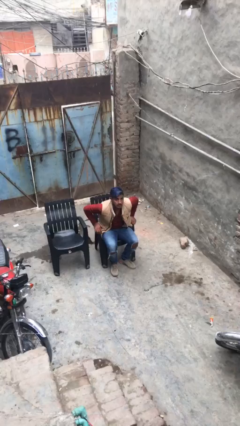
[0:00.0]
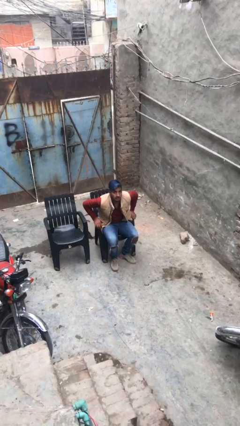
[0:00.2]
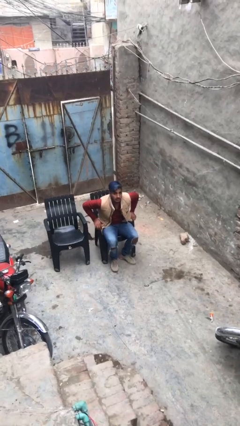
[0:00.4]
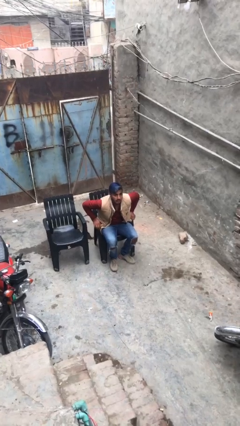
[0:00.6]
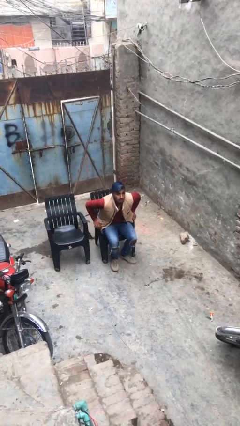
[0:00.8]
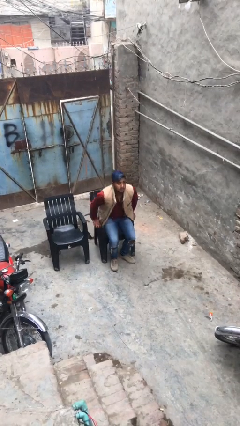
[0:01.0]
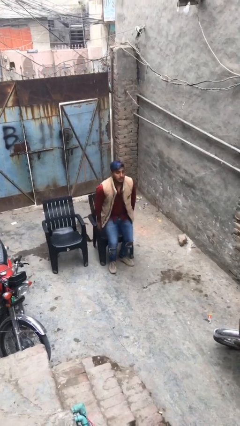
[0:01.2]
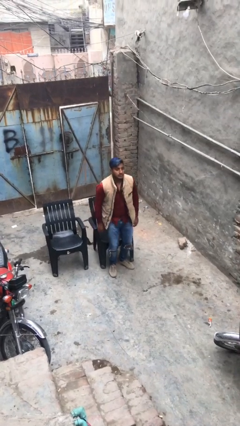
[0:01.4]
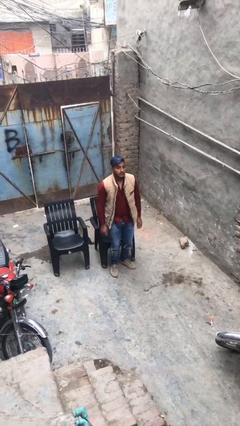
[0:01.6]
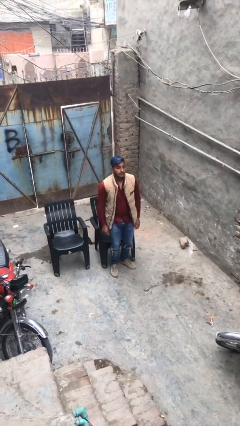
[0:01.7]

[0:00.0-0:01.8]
person stands up

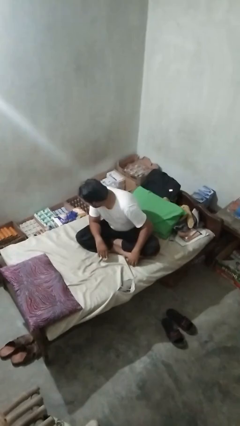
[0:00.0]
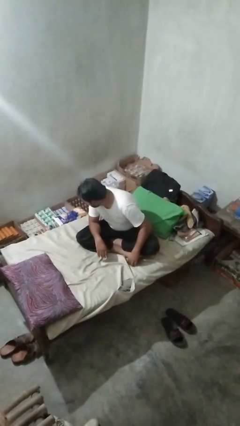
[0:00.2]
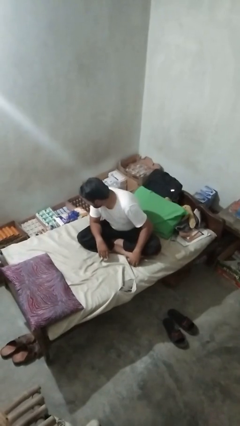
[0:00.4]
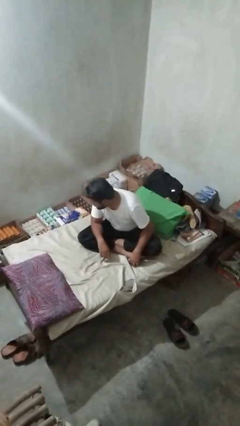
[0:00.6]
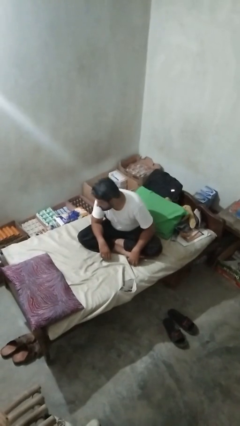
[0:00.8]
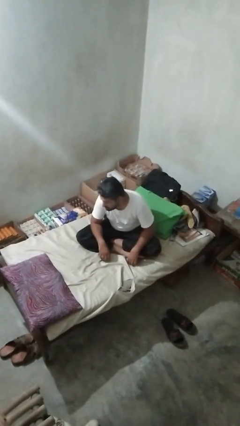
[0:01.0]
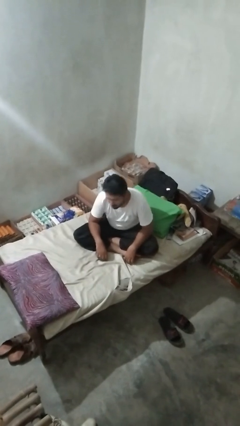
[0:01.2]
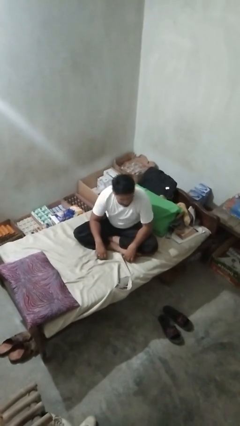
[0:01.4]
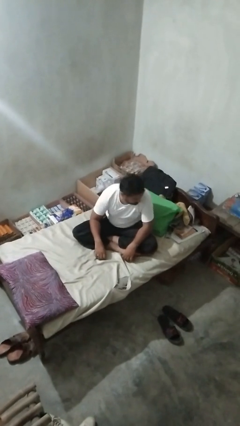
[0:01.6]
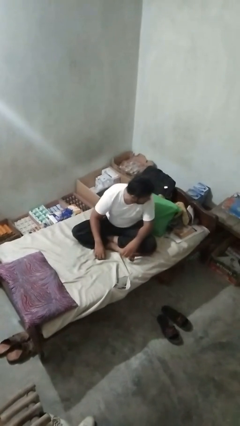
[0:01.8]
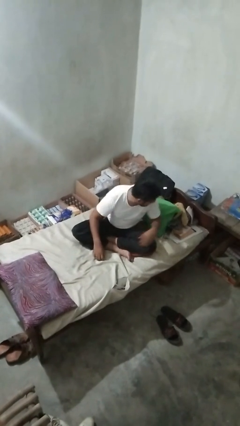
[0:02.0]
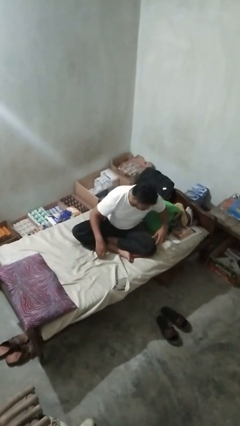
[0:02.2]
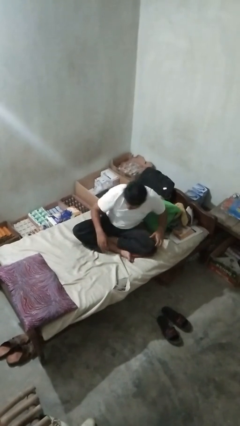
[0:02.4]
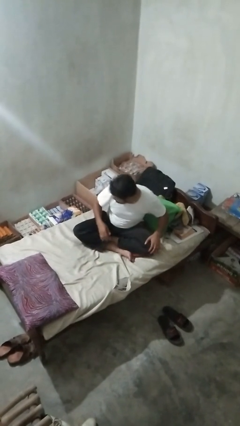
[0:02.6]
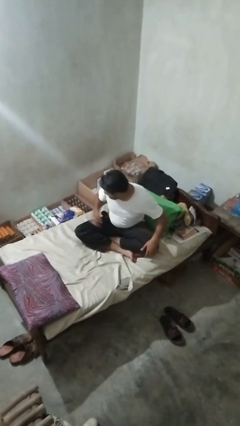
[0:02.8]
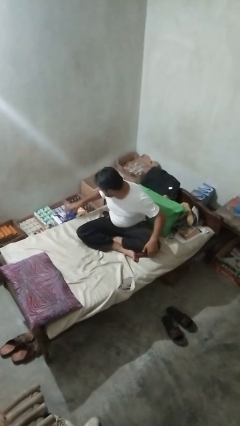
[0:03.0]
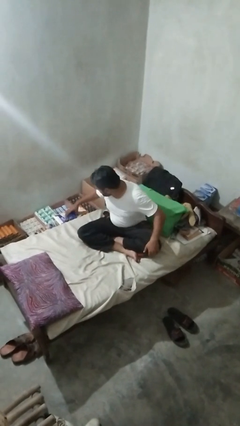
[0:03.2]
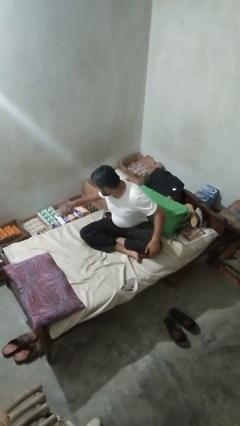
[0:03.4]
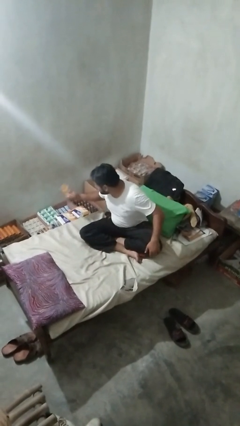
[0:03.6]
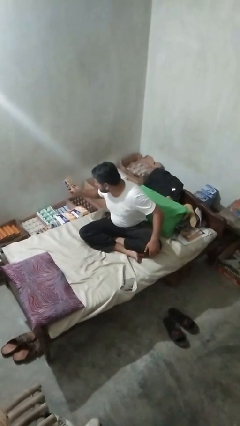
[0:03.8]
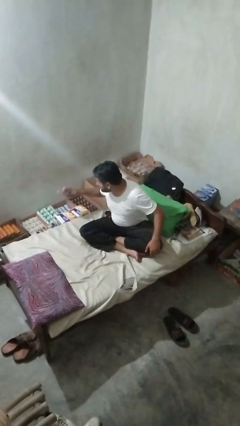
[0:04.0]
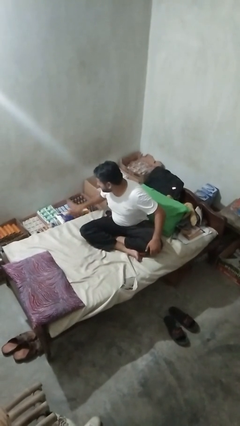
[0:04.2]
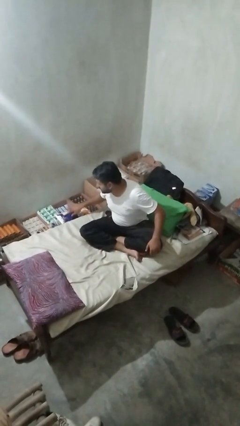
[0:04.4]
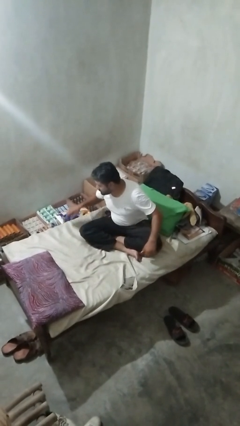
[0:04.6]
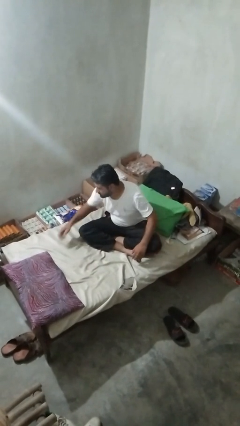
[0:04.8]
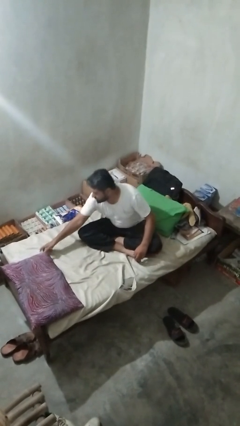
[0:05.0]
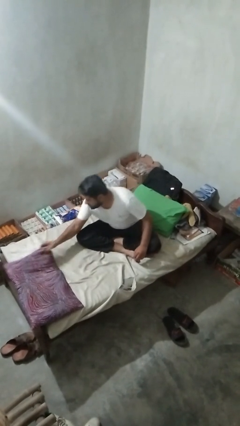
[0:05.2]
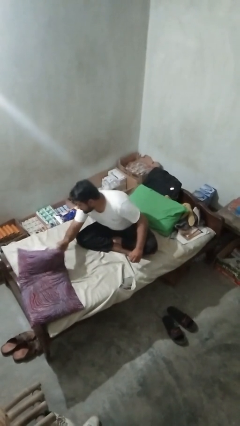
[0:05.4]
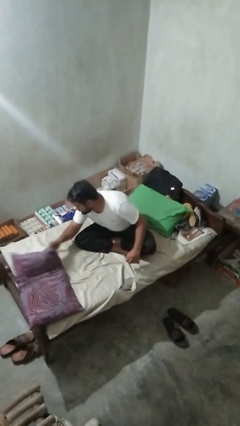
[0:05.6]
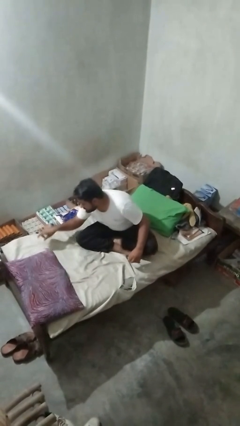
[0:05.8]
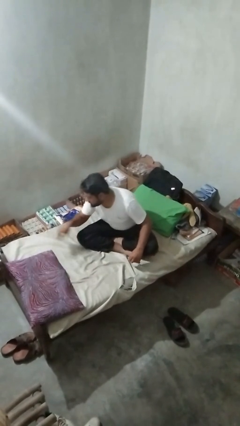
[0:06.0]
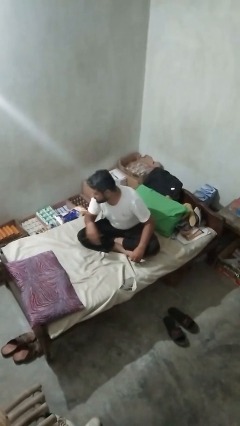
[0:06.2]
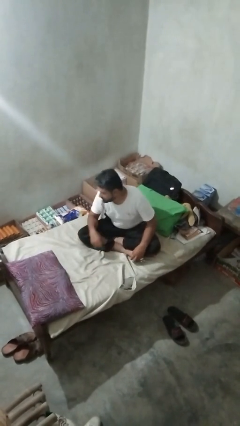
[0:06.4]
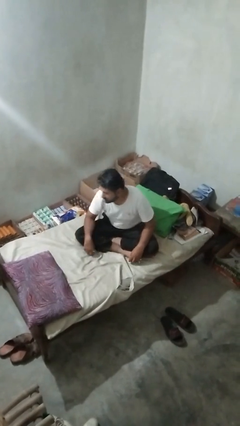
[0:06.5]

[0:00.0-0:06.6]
person searches under bed

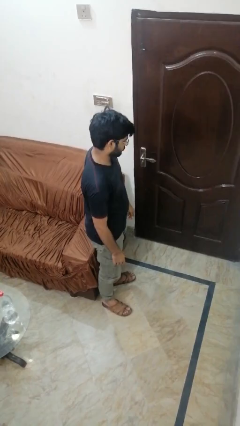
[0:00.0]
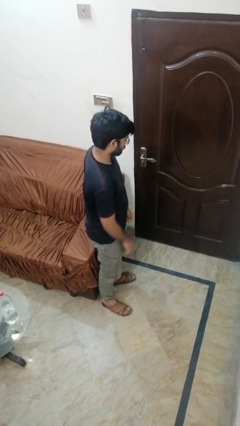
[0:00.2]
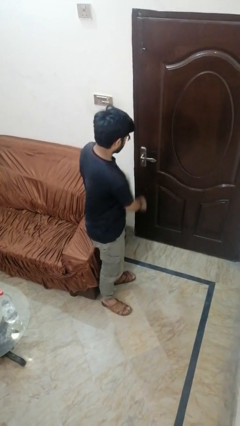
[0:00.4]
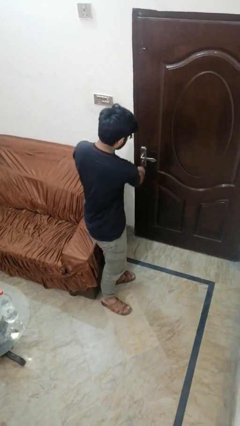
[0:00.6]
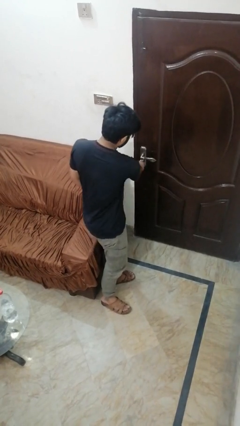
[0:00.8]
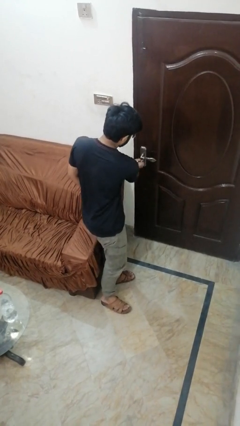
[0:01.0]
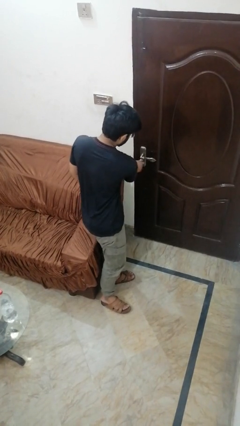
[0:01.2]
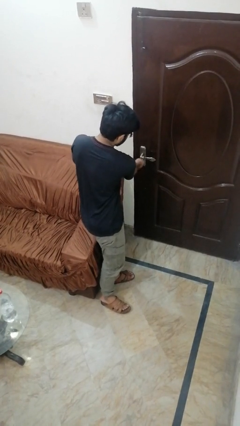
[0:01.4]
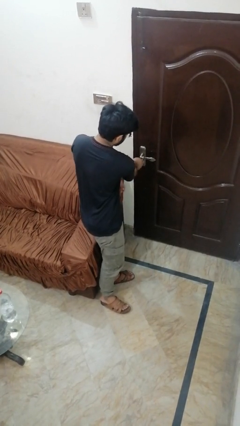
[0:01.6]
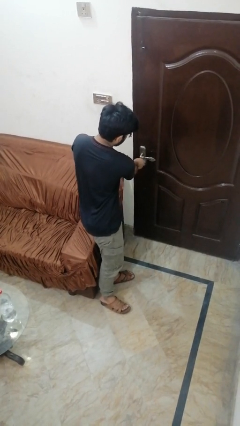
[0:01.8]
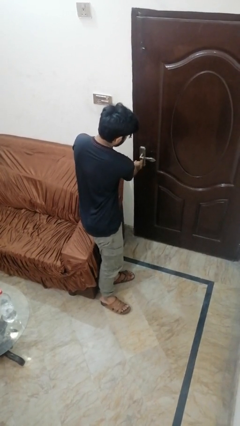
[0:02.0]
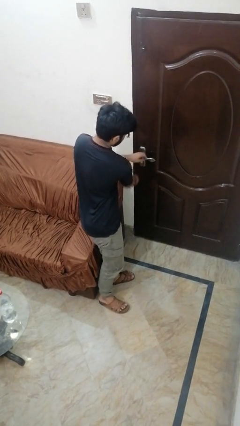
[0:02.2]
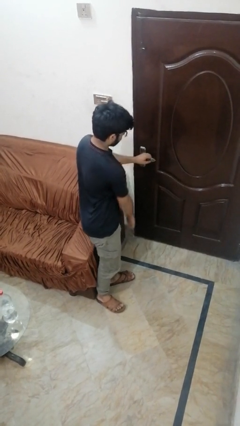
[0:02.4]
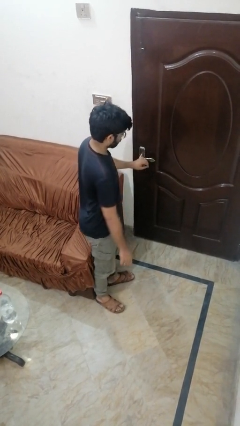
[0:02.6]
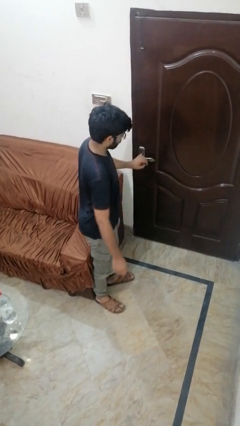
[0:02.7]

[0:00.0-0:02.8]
person unlocks door with keys

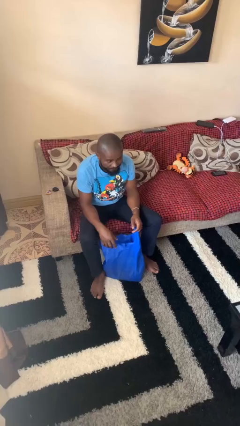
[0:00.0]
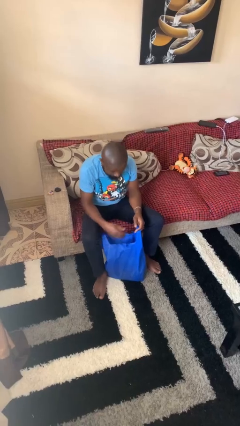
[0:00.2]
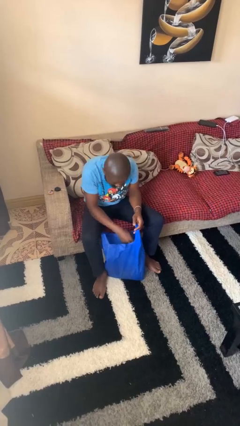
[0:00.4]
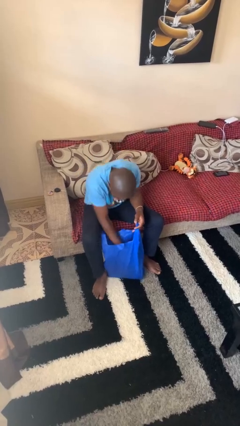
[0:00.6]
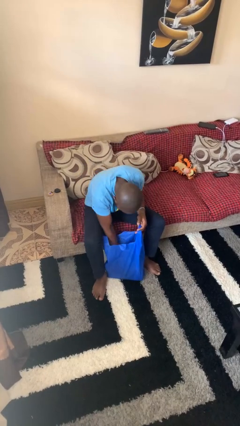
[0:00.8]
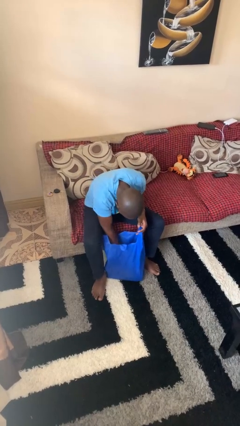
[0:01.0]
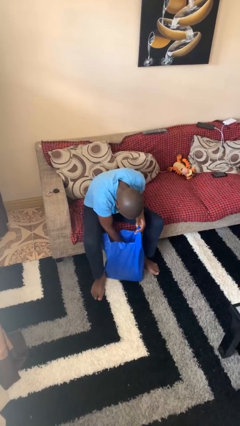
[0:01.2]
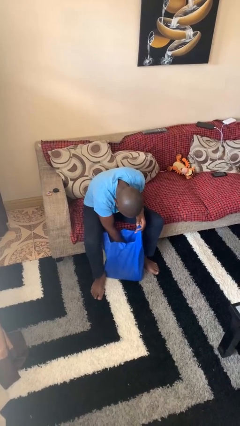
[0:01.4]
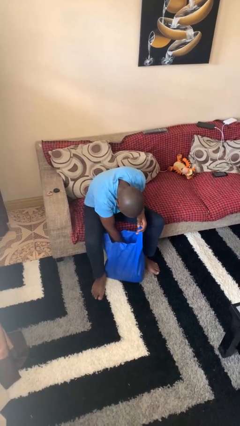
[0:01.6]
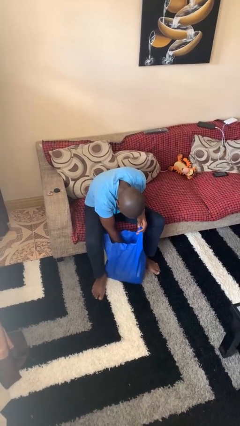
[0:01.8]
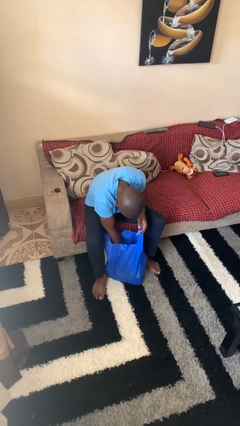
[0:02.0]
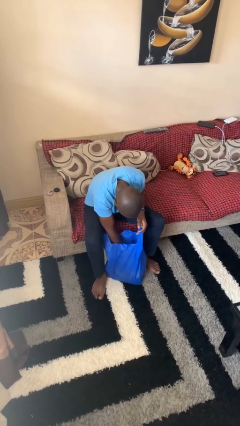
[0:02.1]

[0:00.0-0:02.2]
person searches in bag

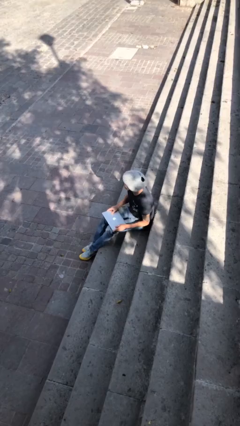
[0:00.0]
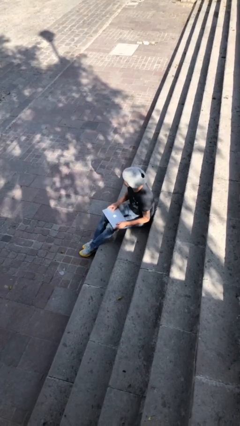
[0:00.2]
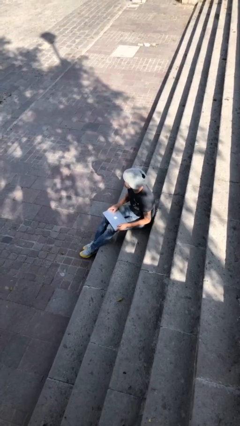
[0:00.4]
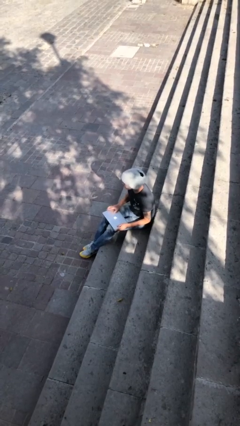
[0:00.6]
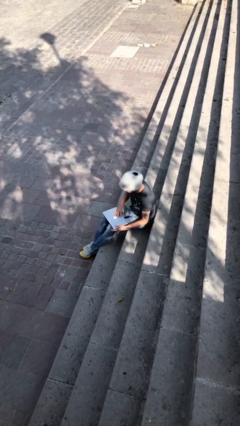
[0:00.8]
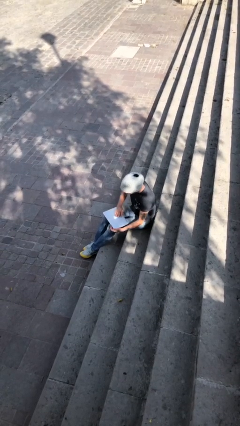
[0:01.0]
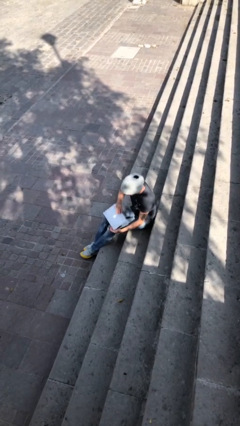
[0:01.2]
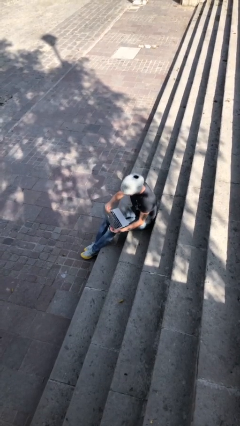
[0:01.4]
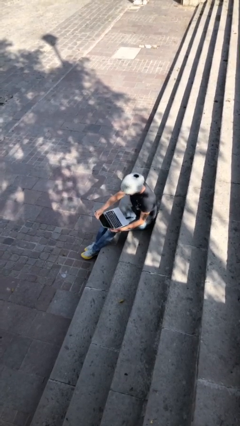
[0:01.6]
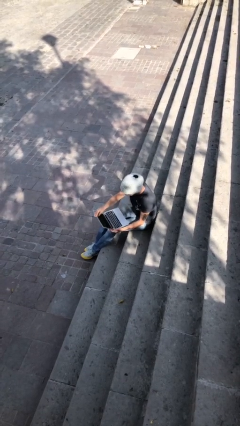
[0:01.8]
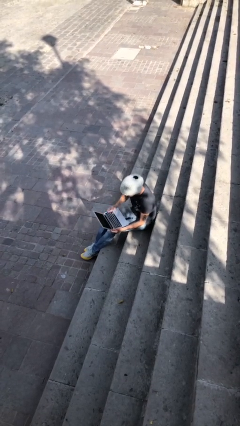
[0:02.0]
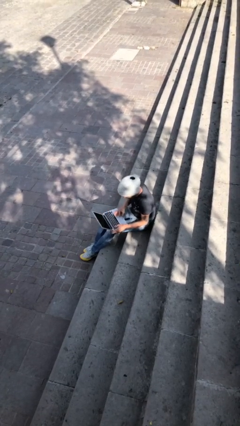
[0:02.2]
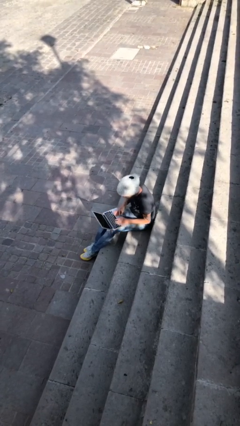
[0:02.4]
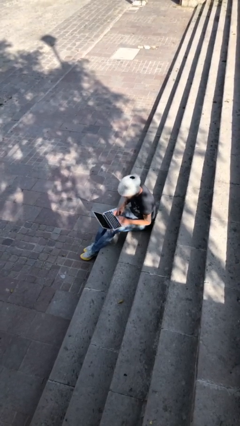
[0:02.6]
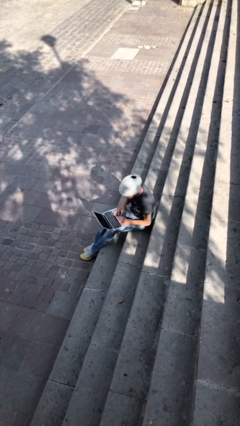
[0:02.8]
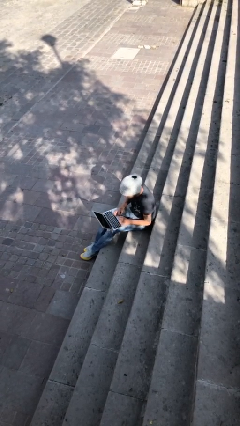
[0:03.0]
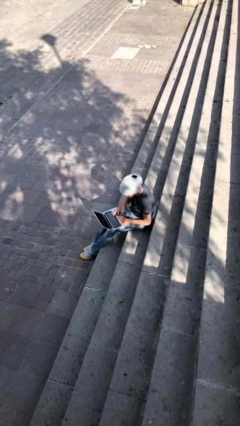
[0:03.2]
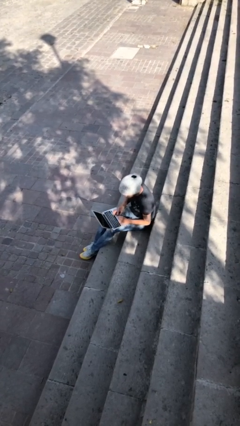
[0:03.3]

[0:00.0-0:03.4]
person interacts with laptop

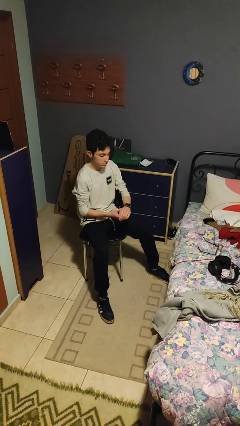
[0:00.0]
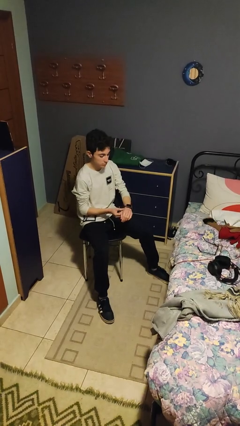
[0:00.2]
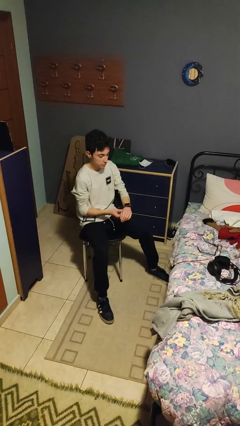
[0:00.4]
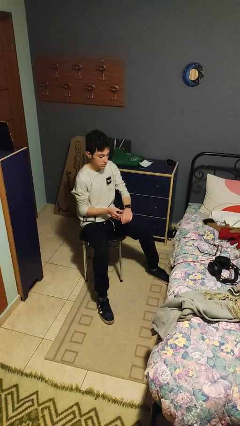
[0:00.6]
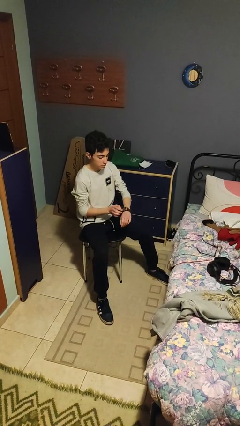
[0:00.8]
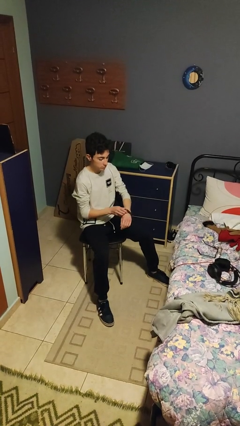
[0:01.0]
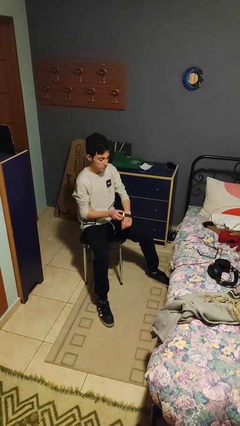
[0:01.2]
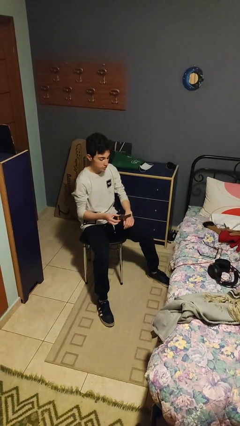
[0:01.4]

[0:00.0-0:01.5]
person takes off wristwatch
